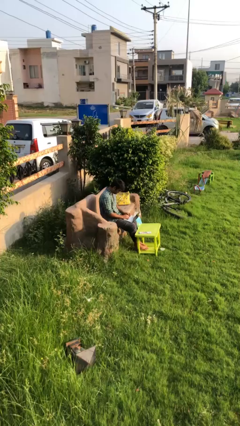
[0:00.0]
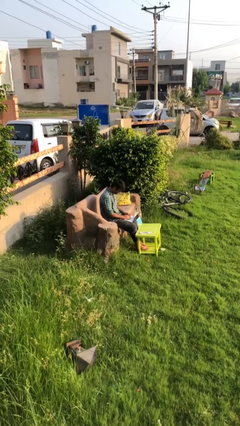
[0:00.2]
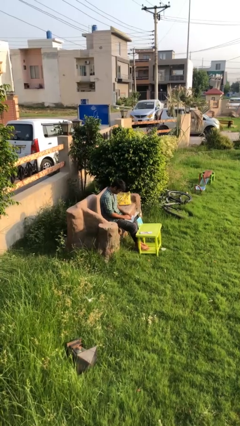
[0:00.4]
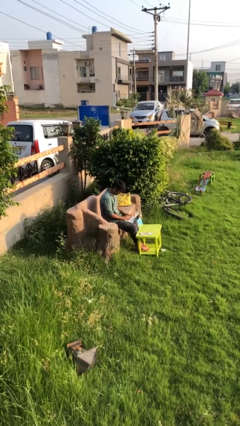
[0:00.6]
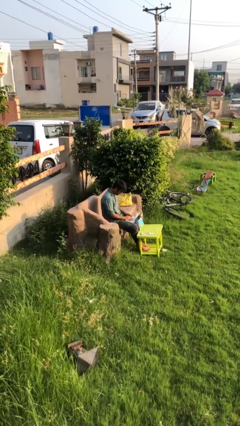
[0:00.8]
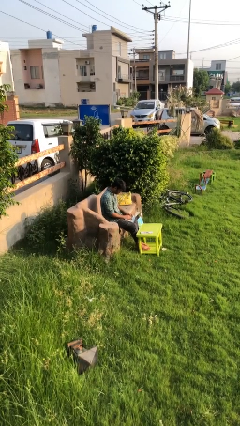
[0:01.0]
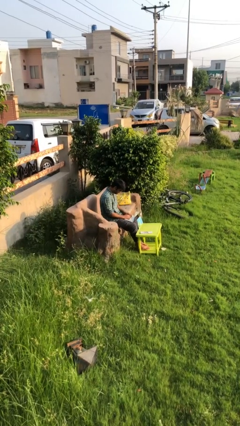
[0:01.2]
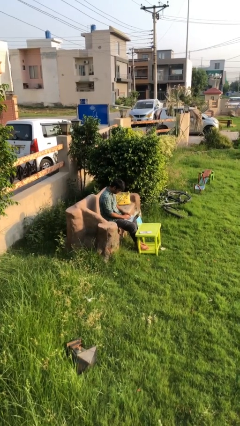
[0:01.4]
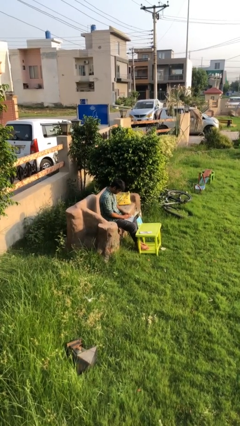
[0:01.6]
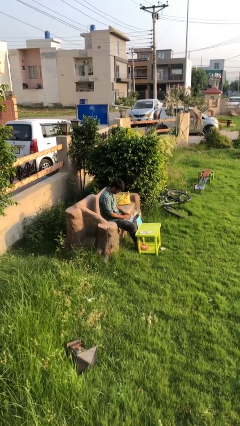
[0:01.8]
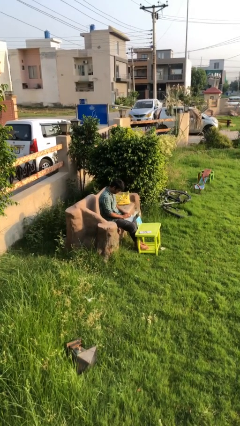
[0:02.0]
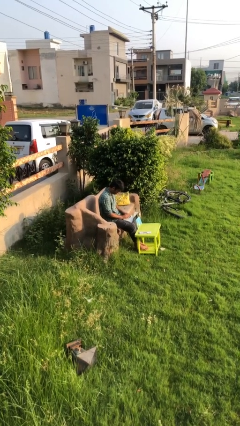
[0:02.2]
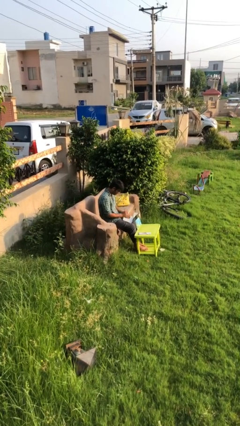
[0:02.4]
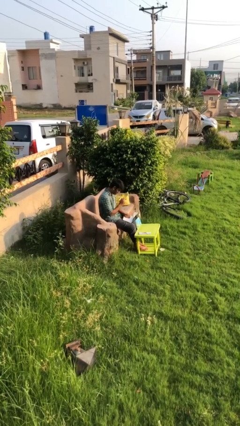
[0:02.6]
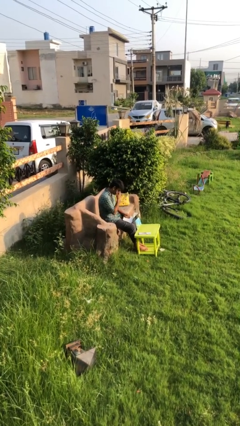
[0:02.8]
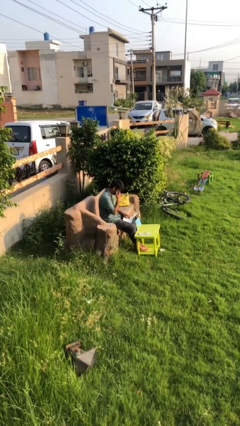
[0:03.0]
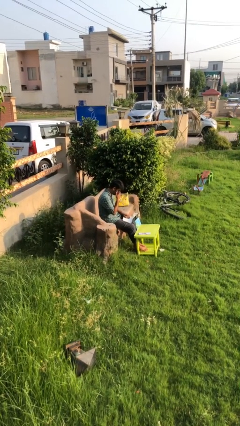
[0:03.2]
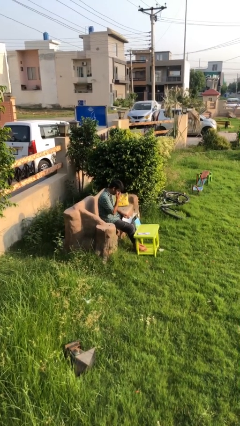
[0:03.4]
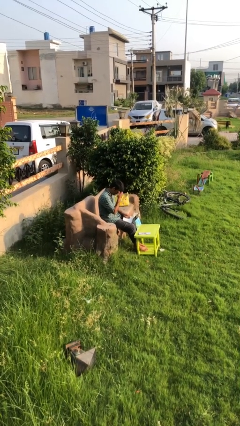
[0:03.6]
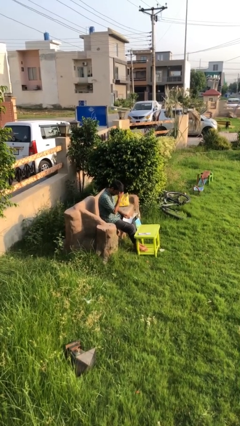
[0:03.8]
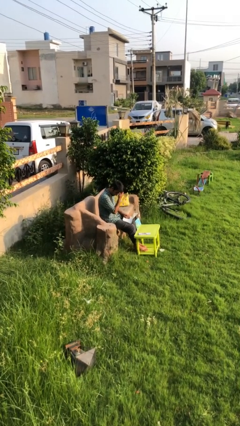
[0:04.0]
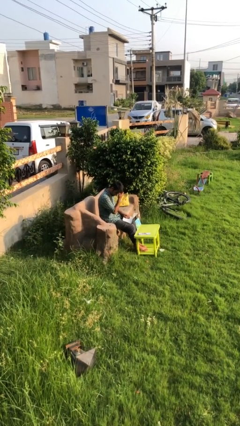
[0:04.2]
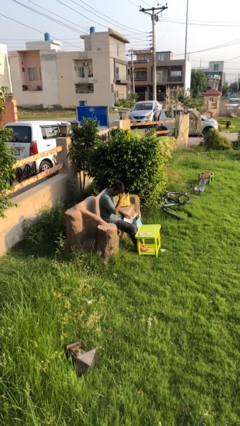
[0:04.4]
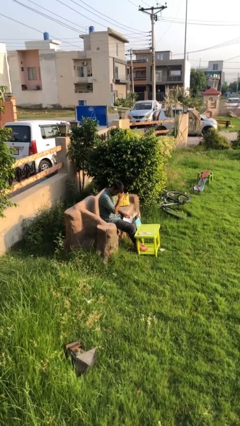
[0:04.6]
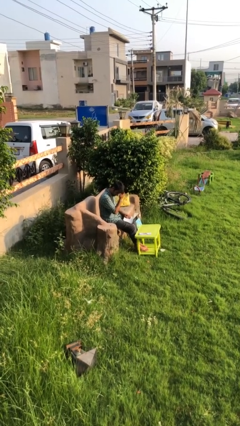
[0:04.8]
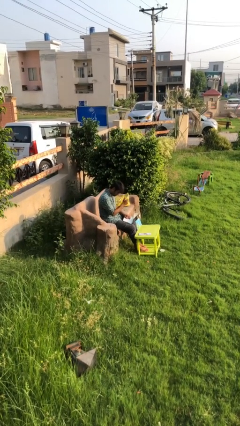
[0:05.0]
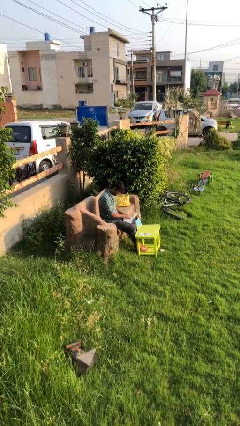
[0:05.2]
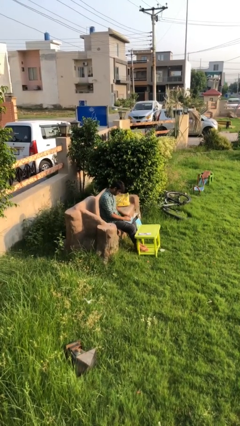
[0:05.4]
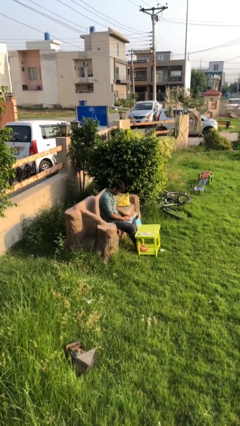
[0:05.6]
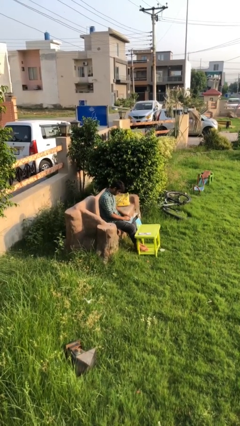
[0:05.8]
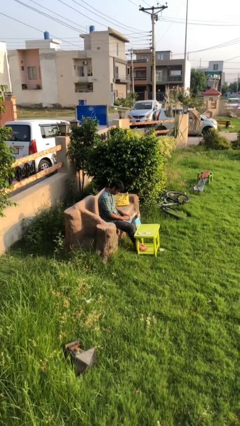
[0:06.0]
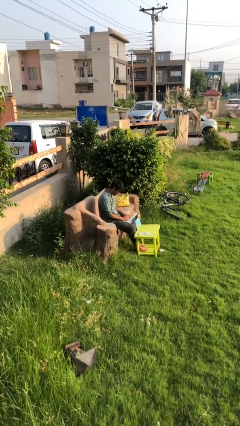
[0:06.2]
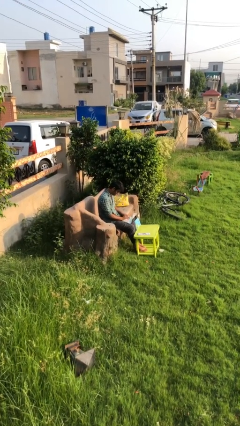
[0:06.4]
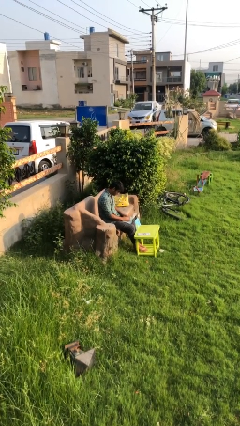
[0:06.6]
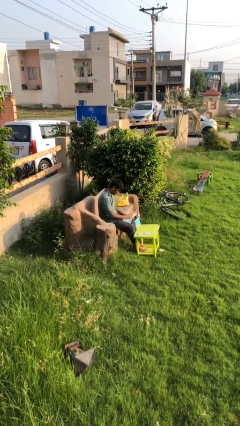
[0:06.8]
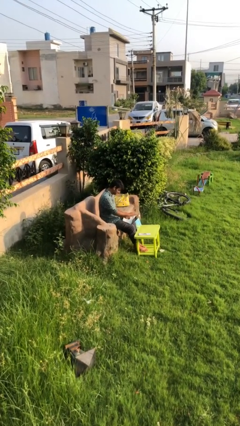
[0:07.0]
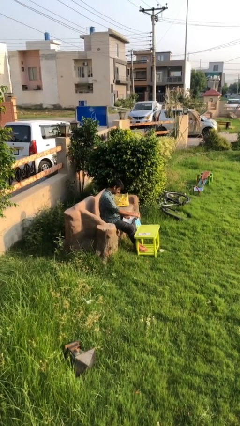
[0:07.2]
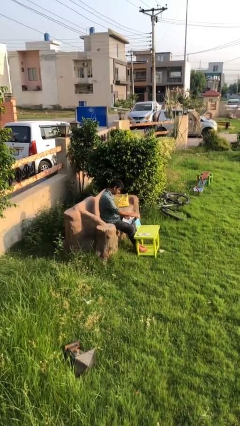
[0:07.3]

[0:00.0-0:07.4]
person interacts with laptop

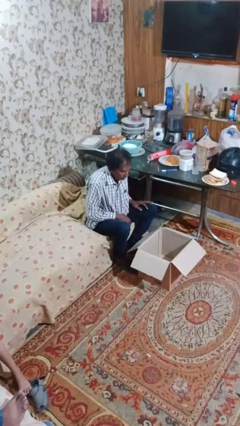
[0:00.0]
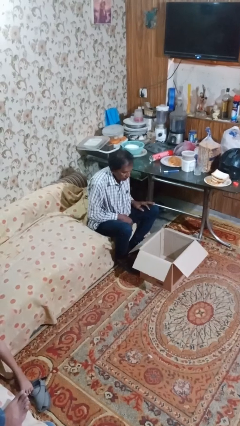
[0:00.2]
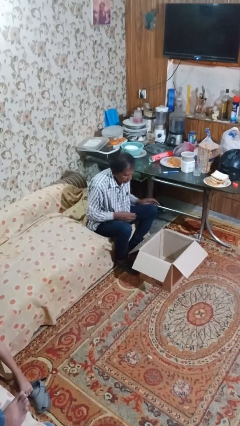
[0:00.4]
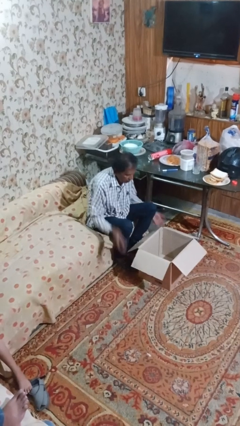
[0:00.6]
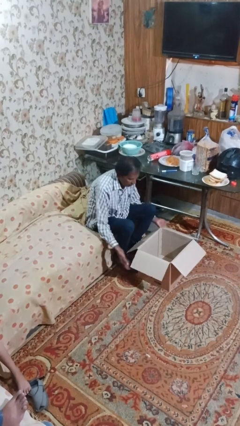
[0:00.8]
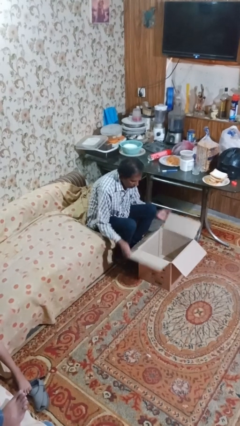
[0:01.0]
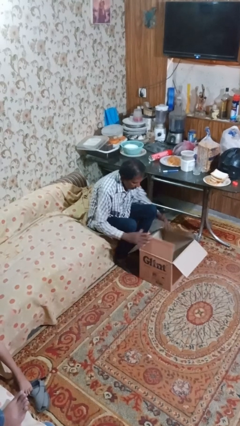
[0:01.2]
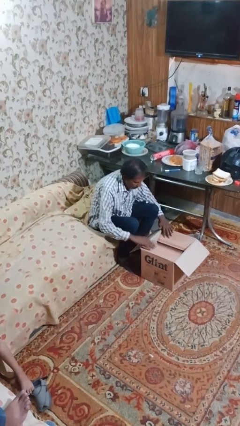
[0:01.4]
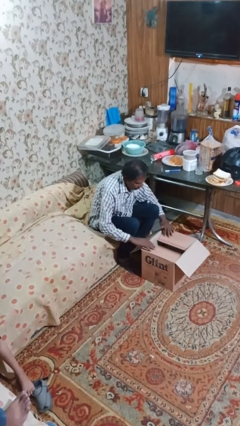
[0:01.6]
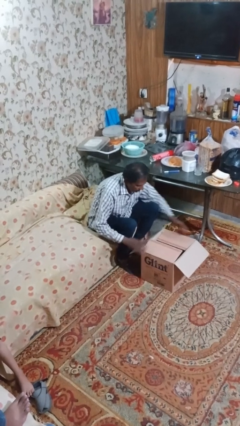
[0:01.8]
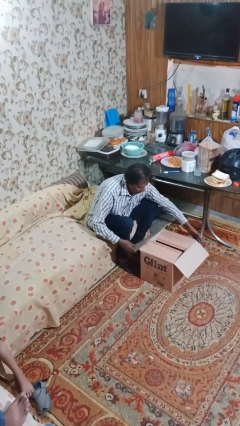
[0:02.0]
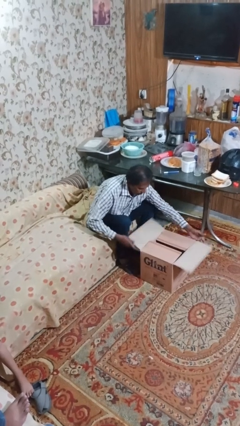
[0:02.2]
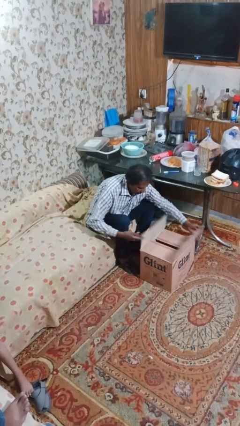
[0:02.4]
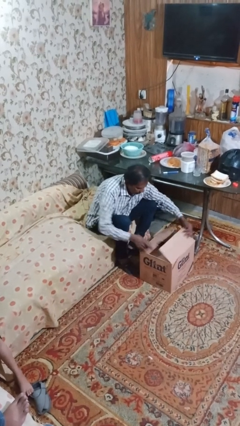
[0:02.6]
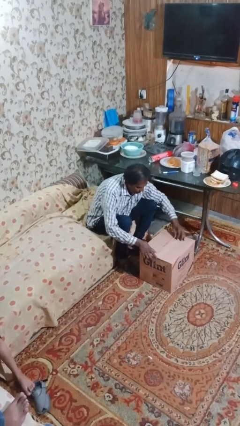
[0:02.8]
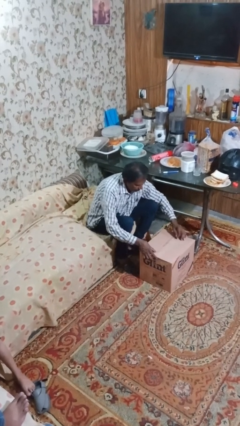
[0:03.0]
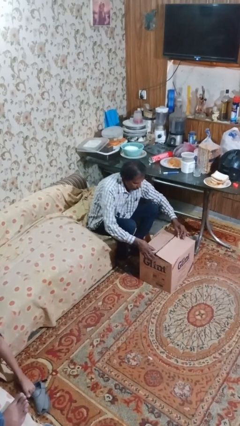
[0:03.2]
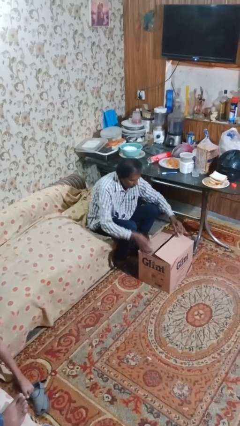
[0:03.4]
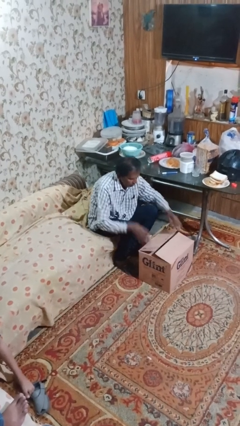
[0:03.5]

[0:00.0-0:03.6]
person closes box

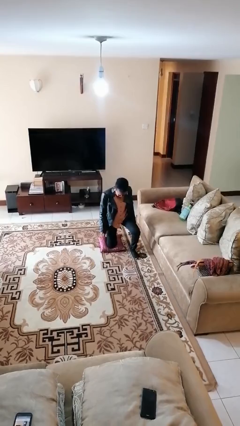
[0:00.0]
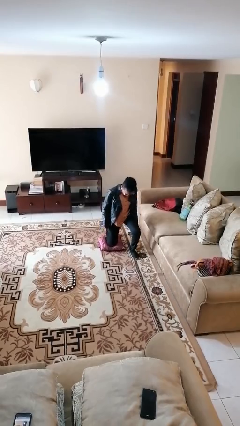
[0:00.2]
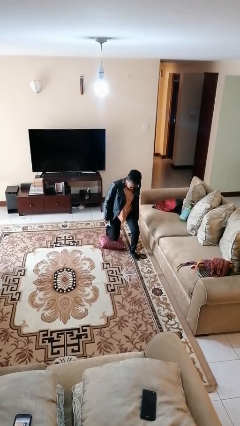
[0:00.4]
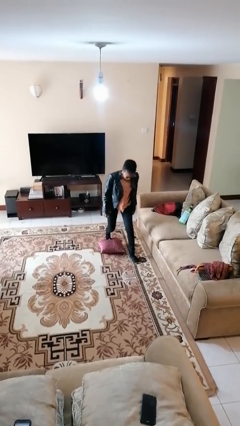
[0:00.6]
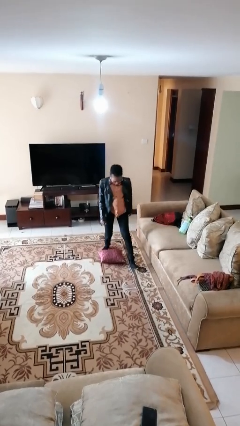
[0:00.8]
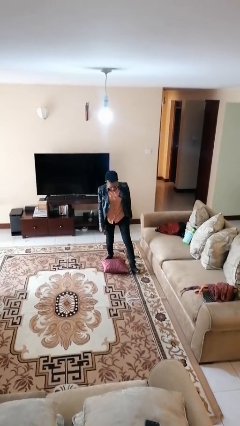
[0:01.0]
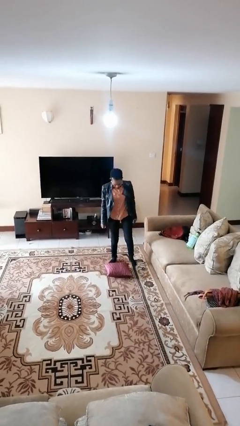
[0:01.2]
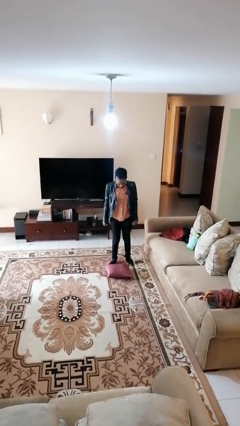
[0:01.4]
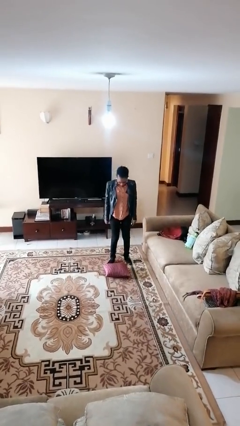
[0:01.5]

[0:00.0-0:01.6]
person stands up from floor

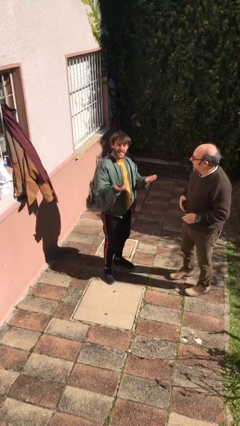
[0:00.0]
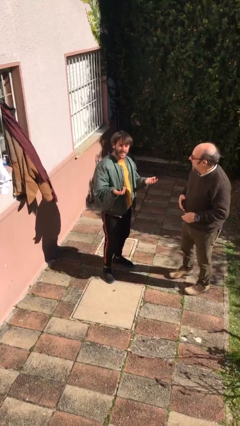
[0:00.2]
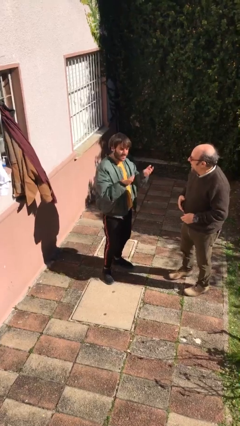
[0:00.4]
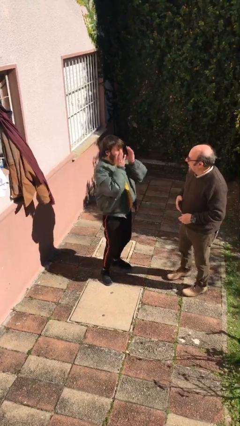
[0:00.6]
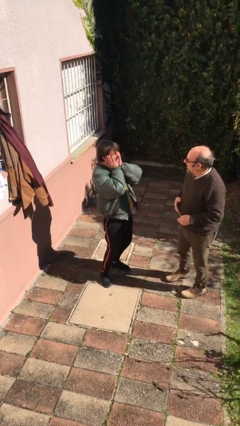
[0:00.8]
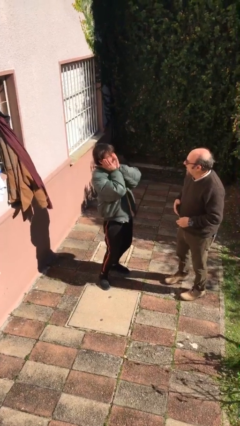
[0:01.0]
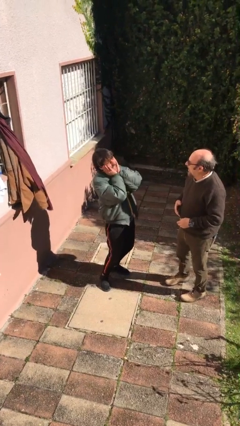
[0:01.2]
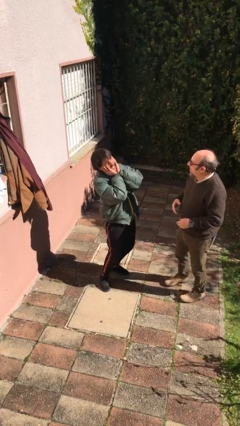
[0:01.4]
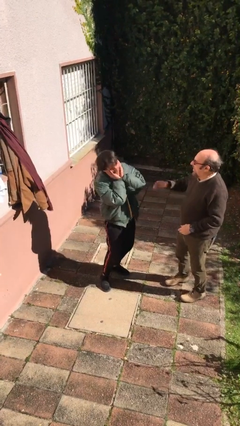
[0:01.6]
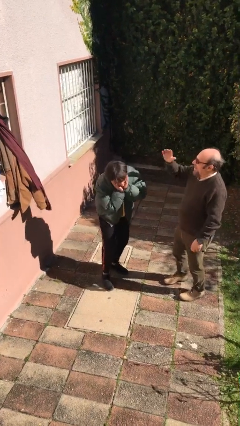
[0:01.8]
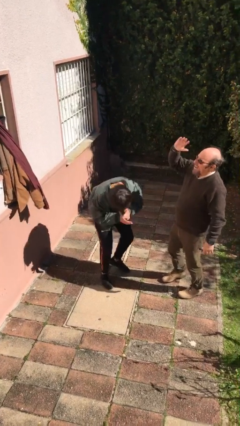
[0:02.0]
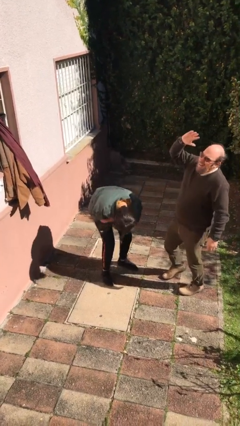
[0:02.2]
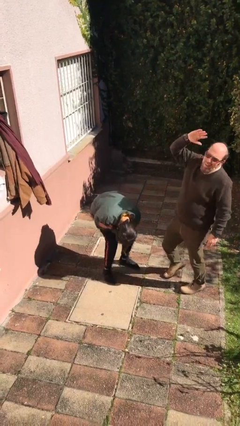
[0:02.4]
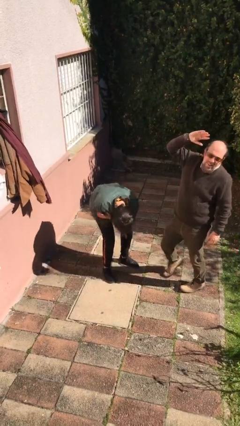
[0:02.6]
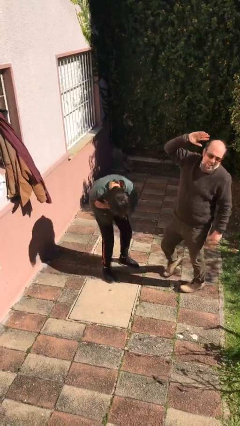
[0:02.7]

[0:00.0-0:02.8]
person laughs with person

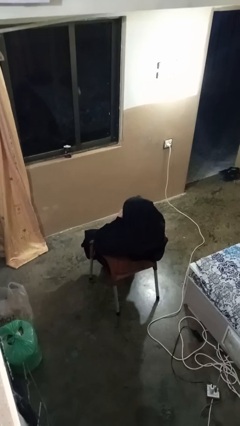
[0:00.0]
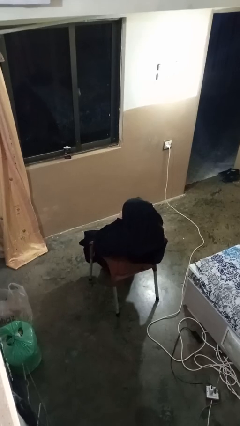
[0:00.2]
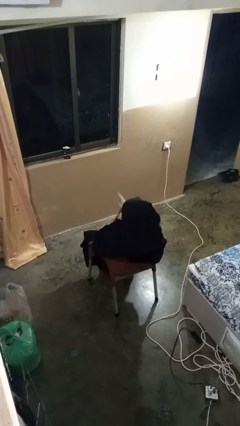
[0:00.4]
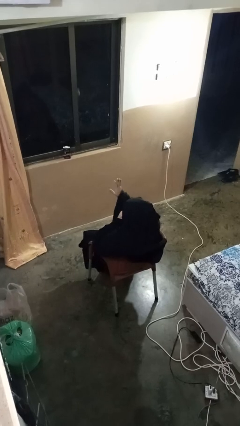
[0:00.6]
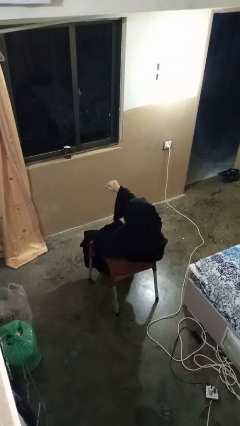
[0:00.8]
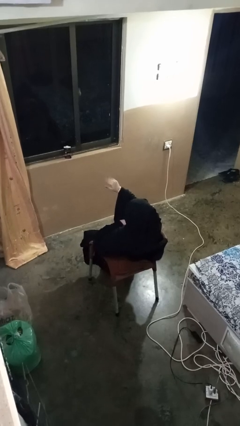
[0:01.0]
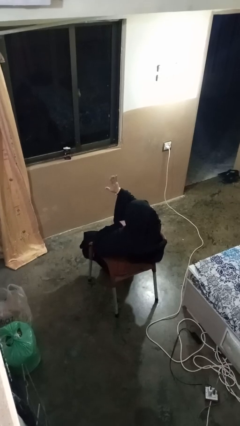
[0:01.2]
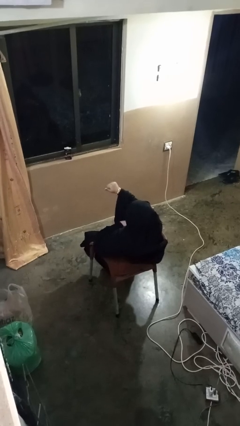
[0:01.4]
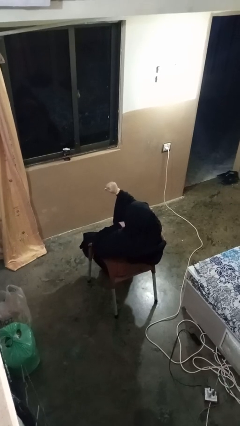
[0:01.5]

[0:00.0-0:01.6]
person gestures come here
